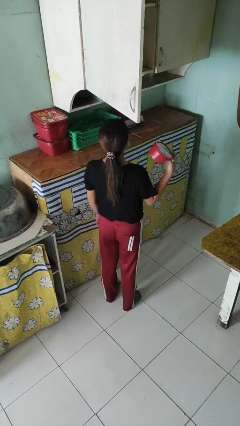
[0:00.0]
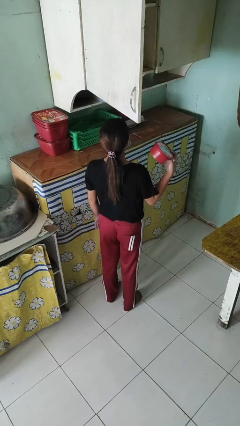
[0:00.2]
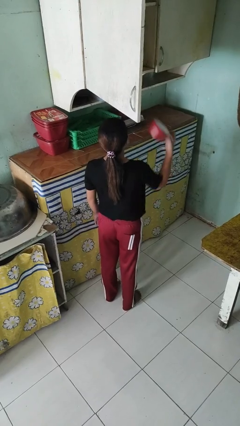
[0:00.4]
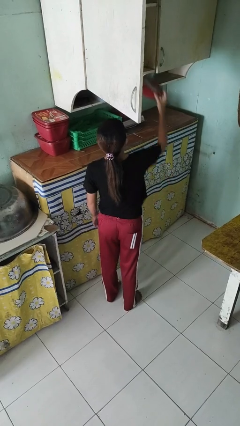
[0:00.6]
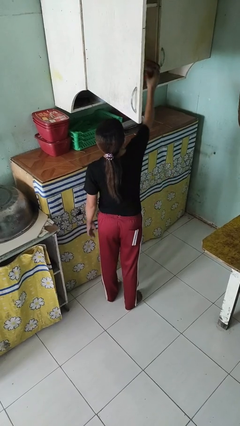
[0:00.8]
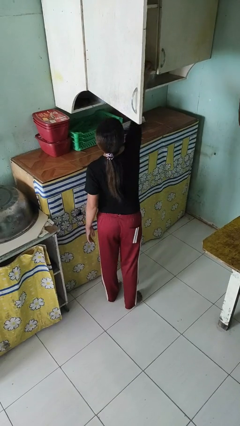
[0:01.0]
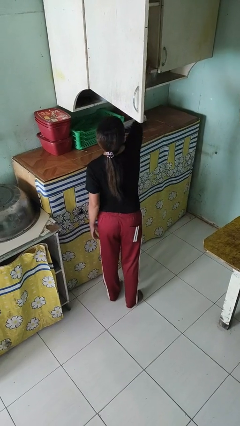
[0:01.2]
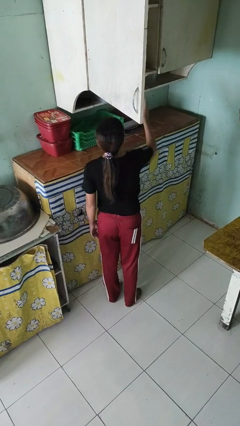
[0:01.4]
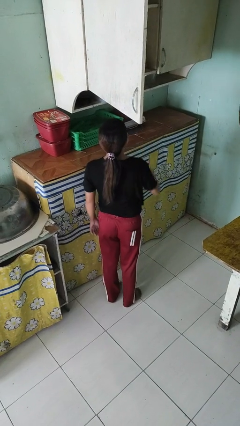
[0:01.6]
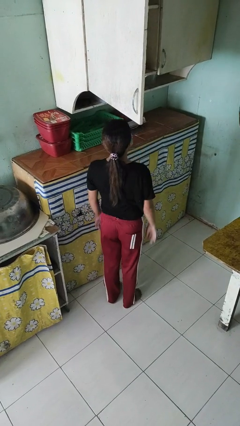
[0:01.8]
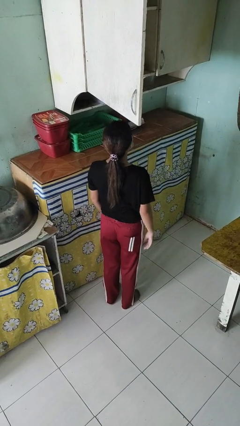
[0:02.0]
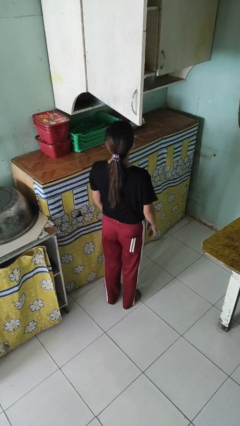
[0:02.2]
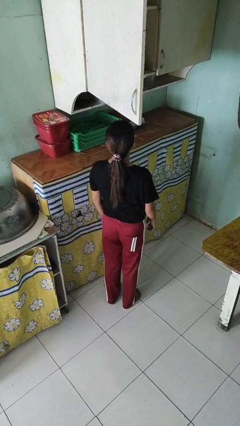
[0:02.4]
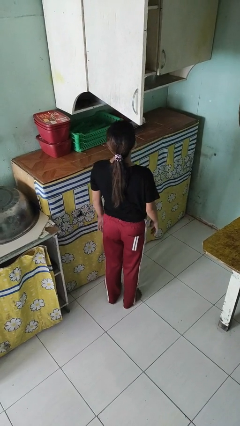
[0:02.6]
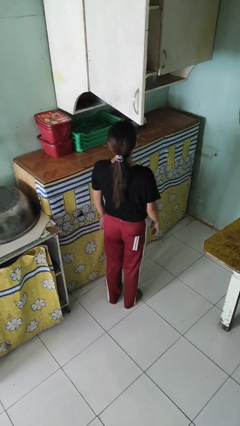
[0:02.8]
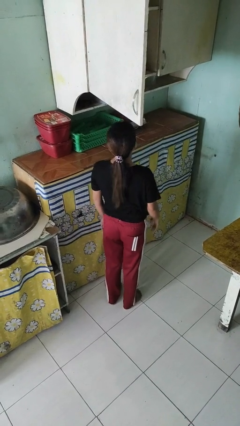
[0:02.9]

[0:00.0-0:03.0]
person puts object in cabinet

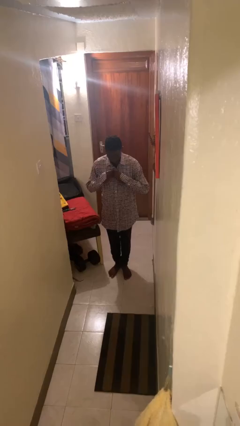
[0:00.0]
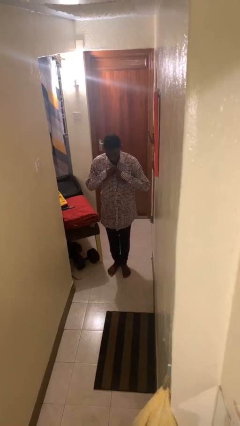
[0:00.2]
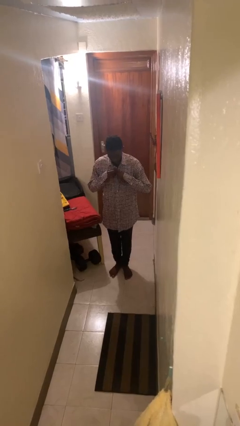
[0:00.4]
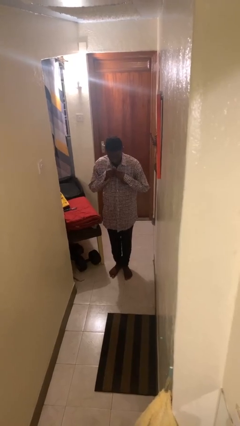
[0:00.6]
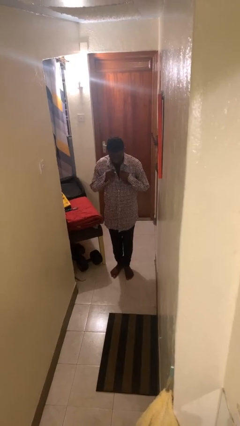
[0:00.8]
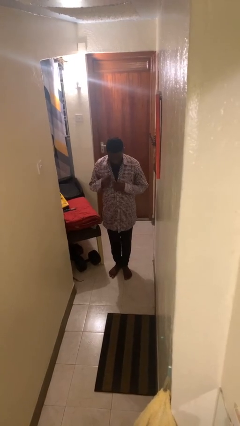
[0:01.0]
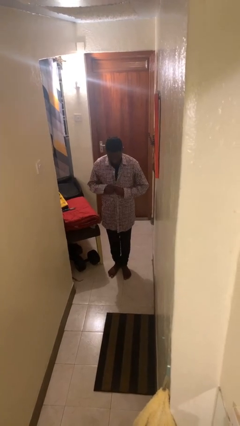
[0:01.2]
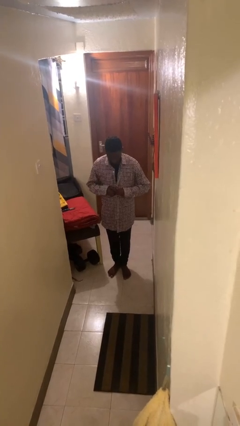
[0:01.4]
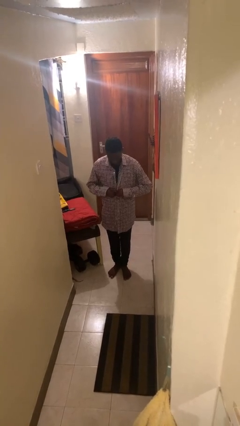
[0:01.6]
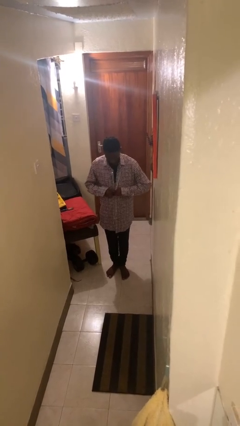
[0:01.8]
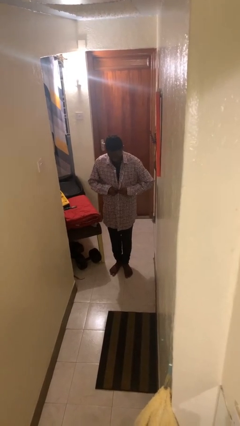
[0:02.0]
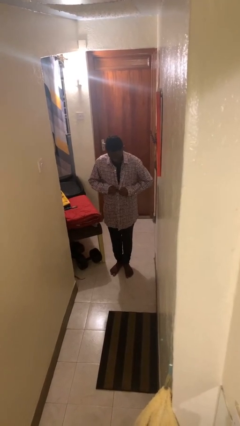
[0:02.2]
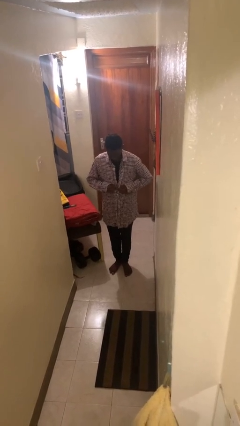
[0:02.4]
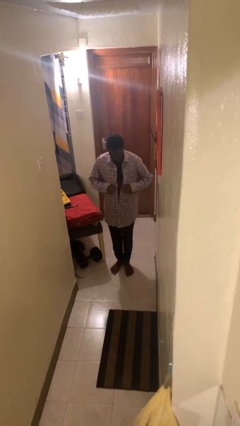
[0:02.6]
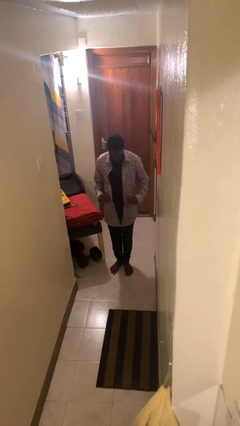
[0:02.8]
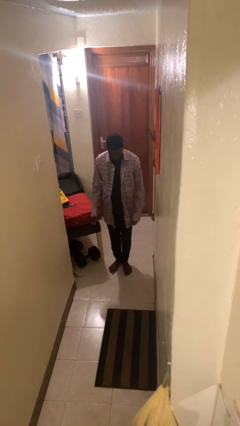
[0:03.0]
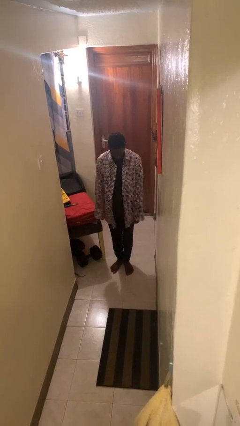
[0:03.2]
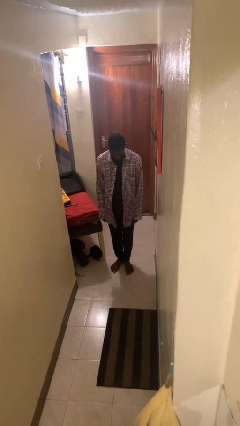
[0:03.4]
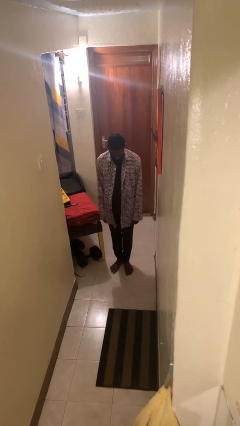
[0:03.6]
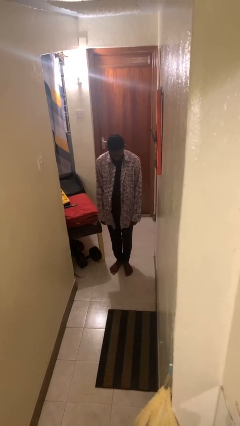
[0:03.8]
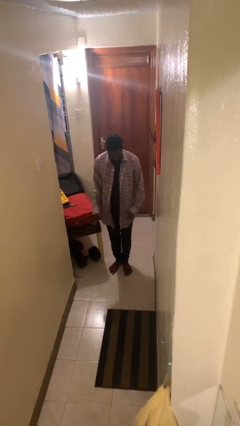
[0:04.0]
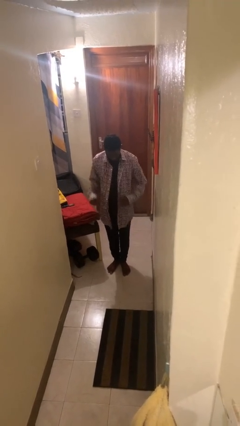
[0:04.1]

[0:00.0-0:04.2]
person unbuttons shirt

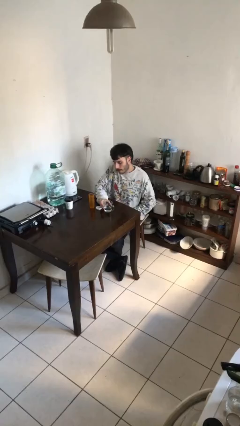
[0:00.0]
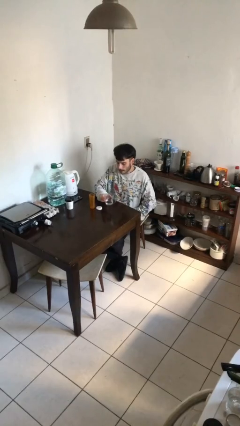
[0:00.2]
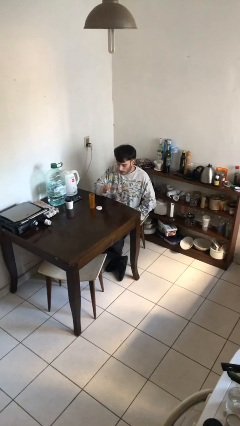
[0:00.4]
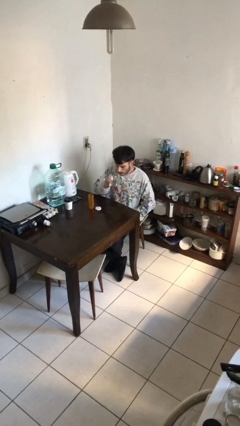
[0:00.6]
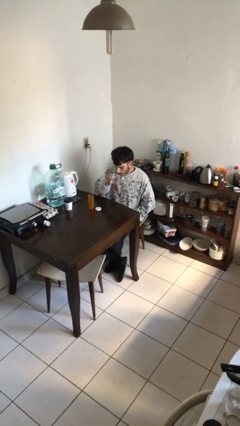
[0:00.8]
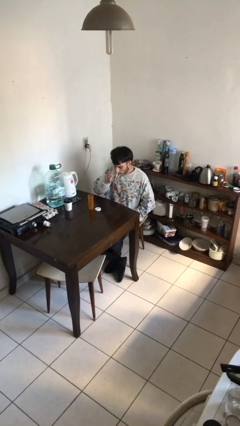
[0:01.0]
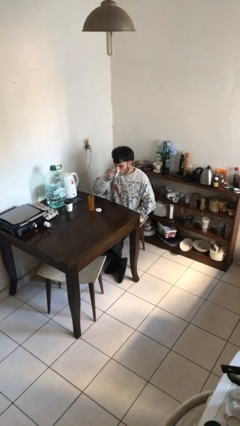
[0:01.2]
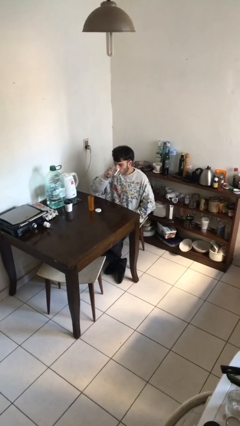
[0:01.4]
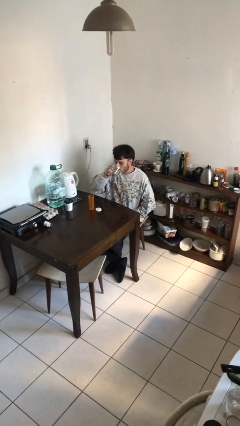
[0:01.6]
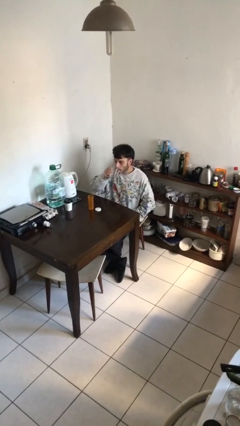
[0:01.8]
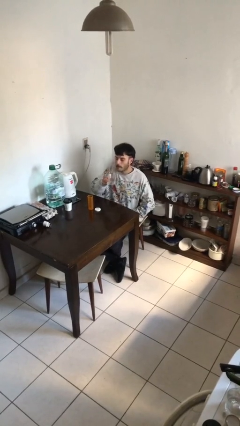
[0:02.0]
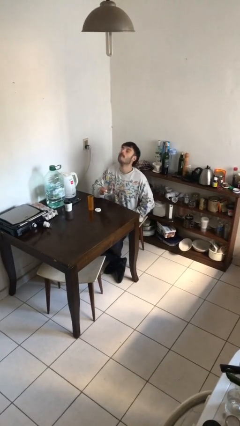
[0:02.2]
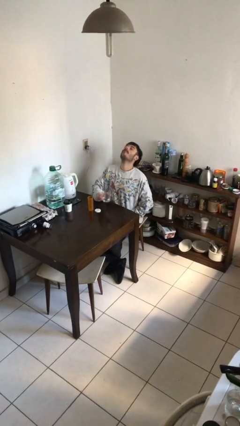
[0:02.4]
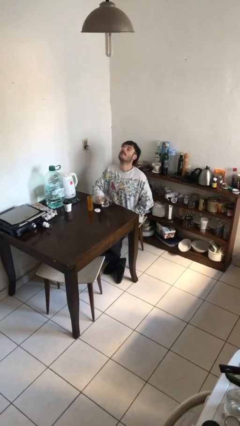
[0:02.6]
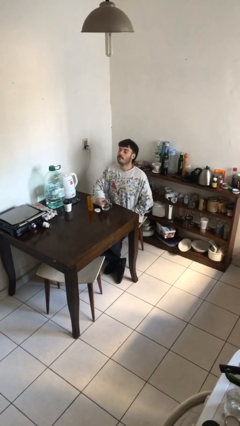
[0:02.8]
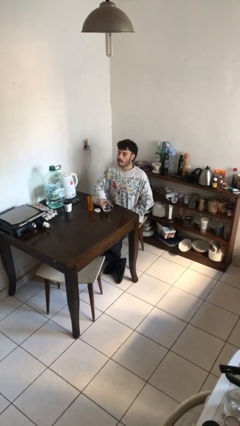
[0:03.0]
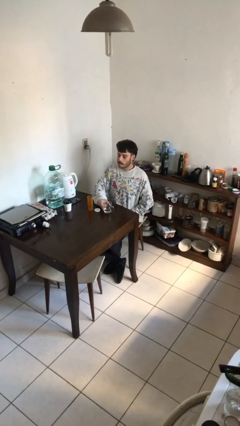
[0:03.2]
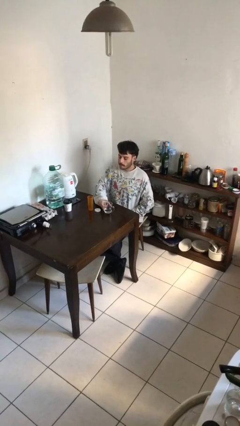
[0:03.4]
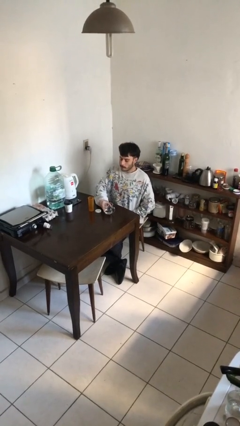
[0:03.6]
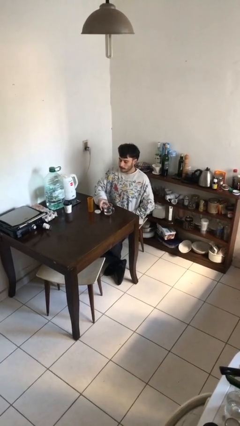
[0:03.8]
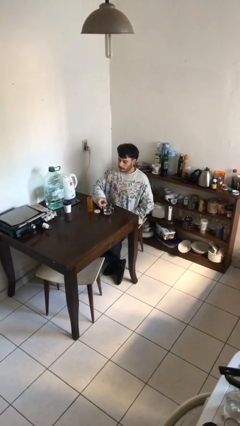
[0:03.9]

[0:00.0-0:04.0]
person drinks from cup

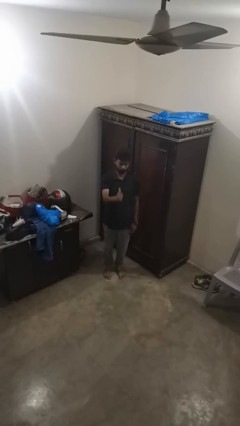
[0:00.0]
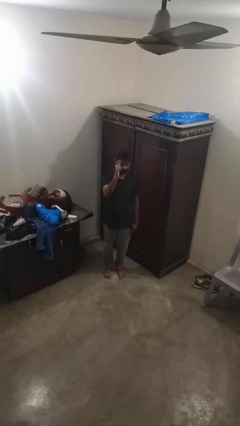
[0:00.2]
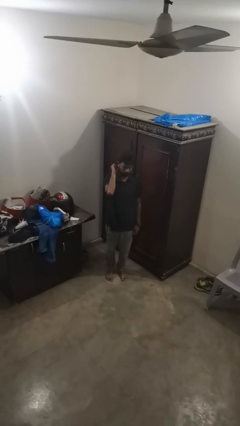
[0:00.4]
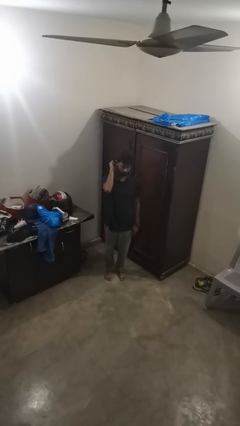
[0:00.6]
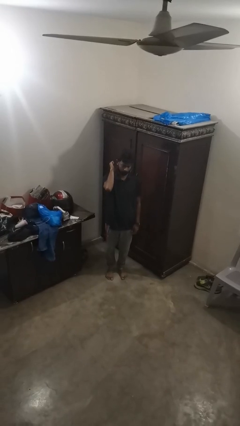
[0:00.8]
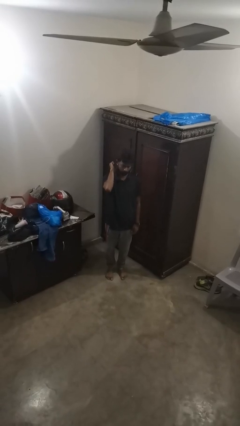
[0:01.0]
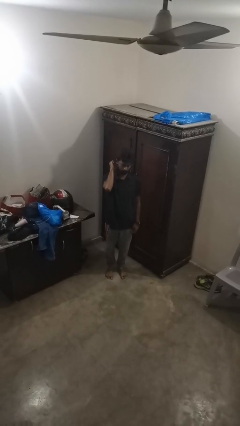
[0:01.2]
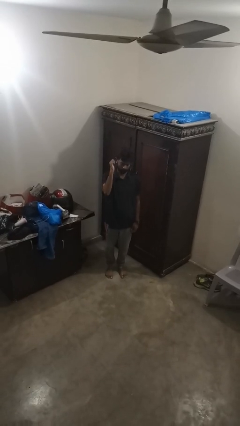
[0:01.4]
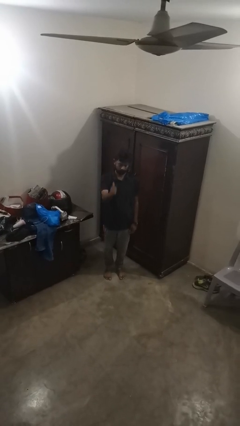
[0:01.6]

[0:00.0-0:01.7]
person gestures behind me

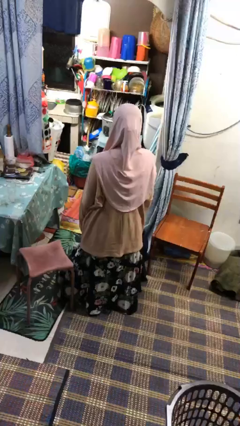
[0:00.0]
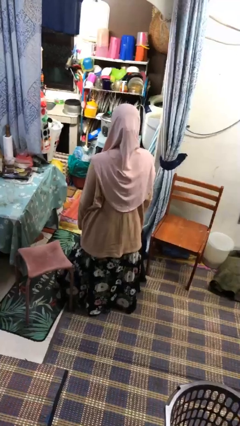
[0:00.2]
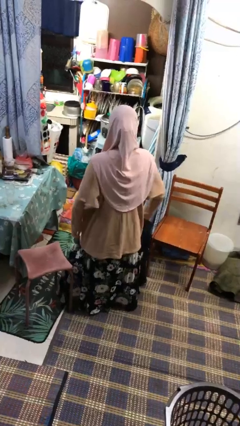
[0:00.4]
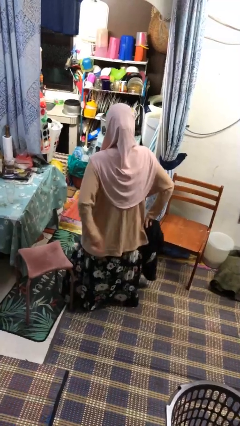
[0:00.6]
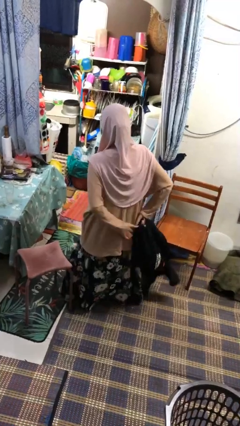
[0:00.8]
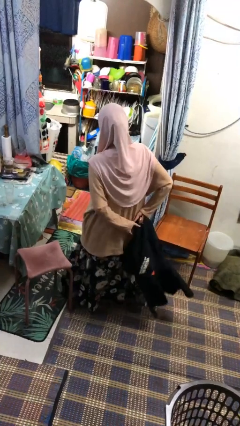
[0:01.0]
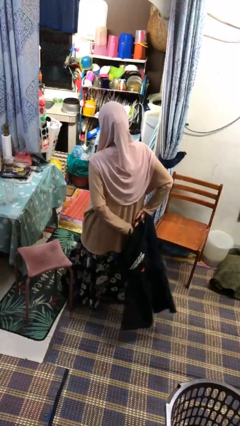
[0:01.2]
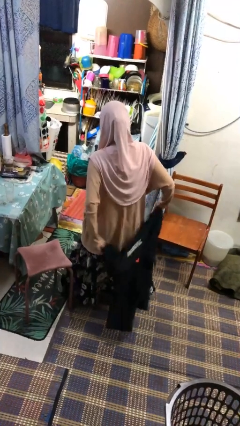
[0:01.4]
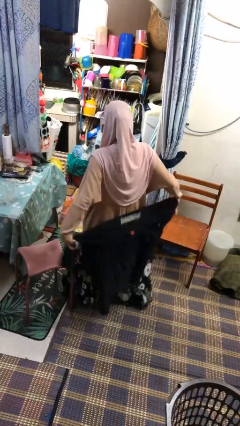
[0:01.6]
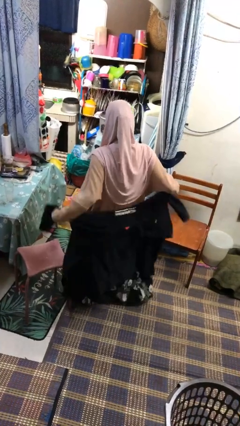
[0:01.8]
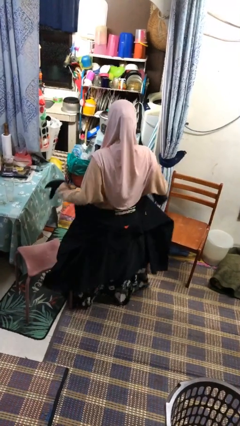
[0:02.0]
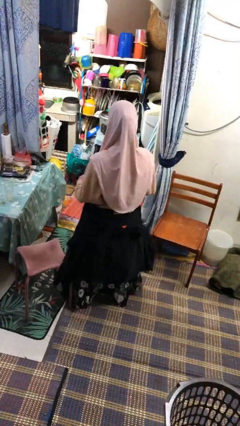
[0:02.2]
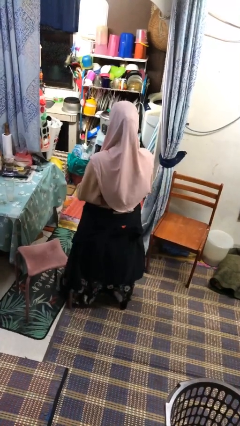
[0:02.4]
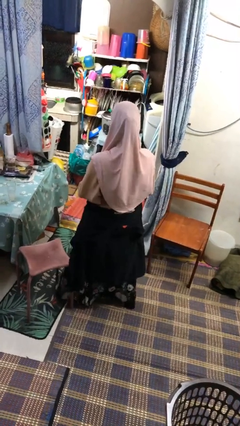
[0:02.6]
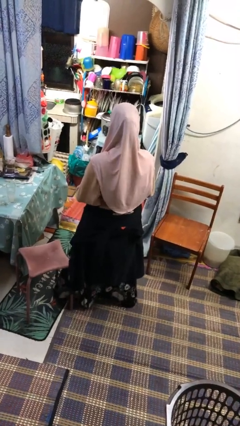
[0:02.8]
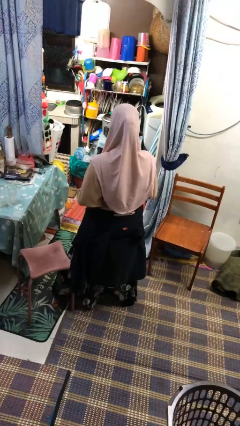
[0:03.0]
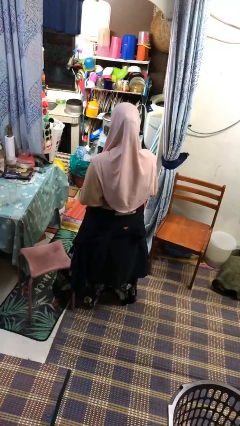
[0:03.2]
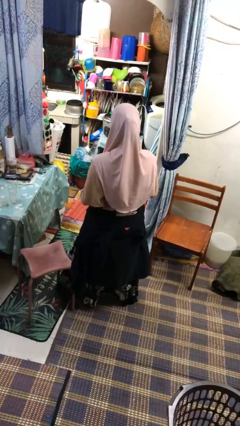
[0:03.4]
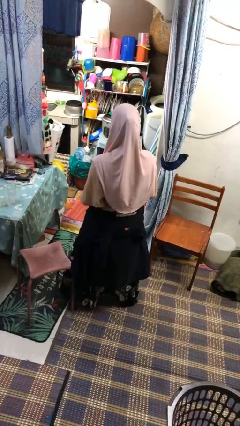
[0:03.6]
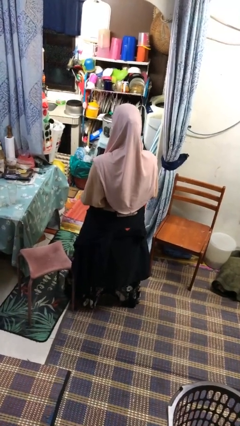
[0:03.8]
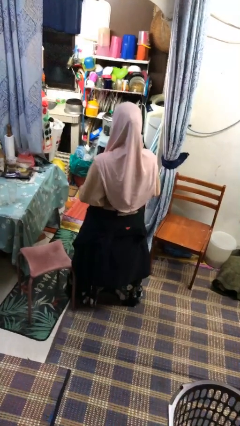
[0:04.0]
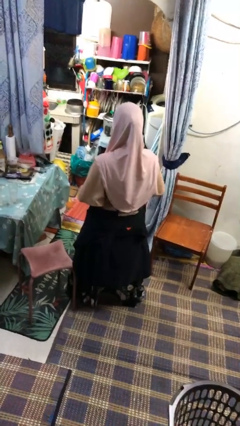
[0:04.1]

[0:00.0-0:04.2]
person ties jacket around waist

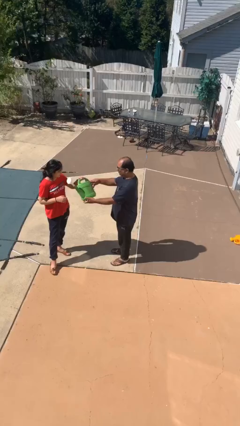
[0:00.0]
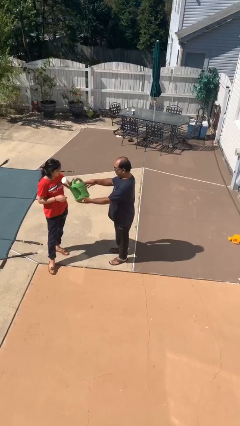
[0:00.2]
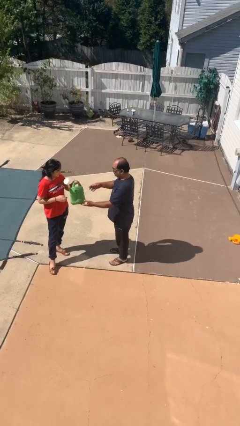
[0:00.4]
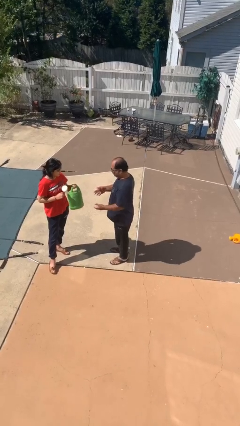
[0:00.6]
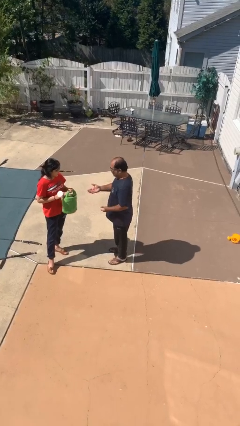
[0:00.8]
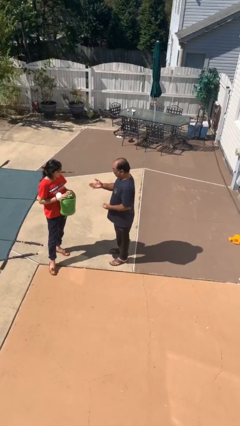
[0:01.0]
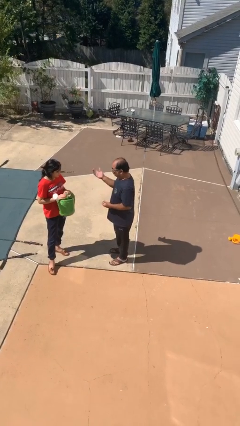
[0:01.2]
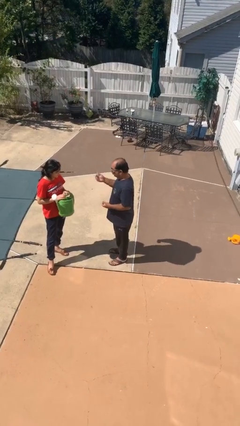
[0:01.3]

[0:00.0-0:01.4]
person transfers object to person
